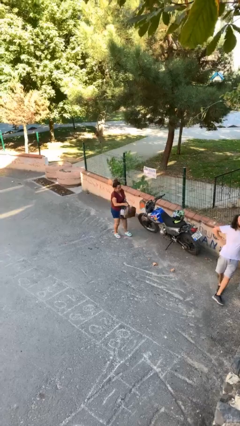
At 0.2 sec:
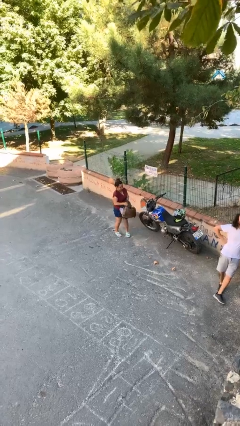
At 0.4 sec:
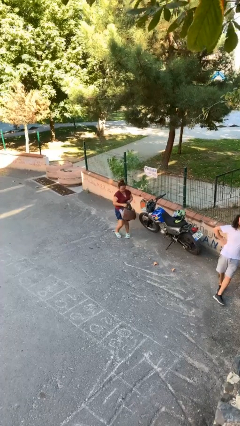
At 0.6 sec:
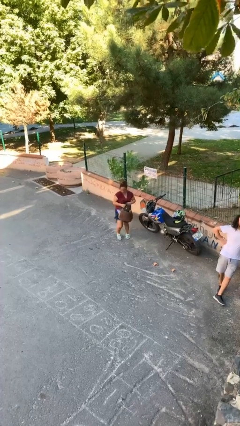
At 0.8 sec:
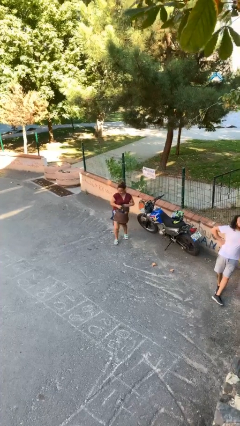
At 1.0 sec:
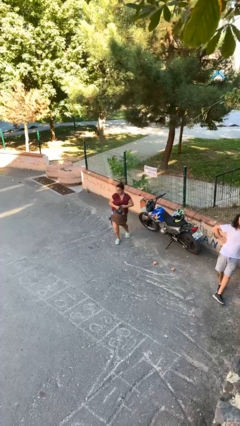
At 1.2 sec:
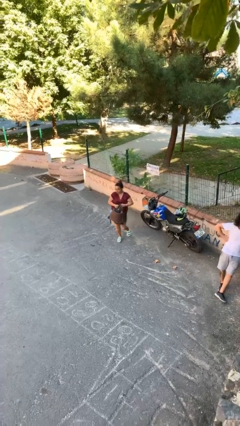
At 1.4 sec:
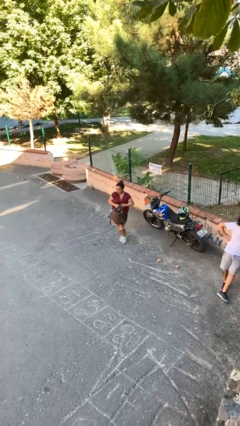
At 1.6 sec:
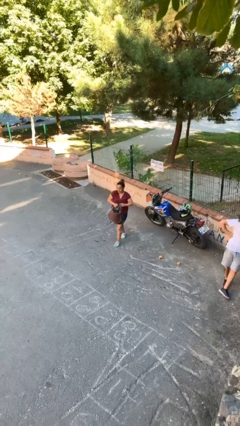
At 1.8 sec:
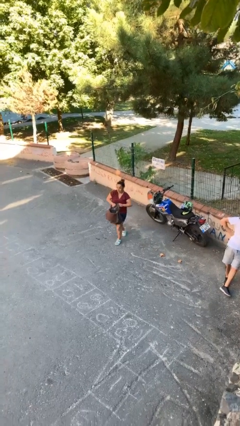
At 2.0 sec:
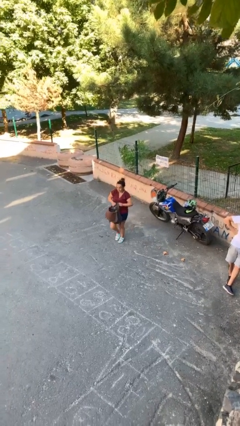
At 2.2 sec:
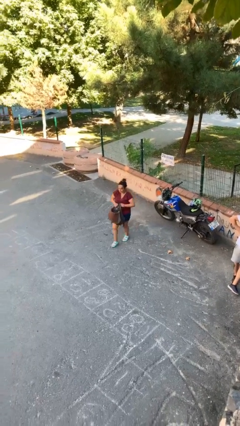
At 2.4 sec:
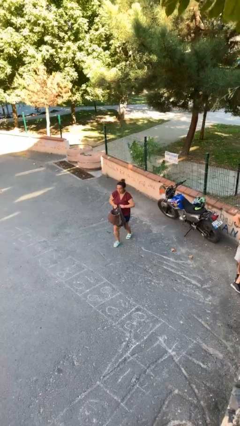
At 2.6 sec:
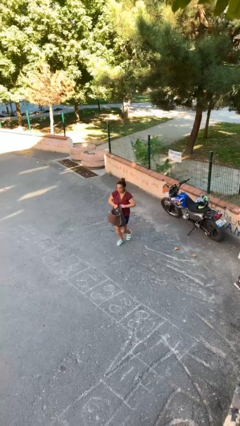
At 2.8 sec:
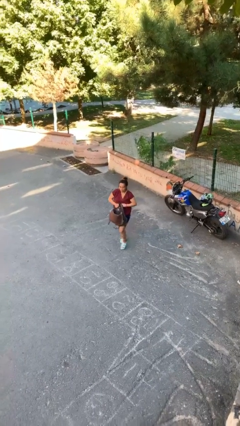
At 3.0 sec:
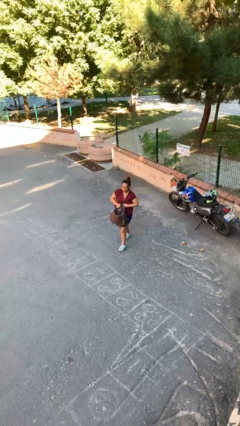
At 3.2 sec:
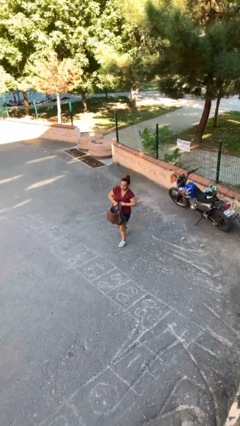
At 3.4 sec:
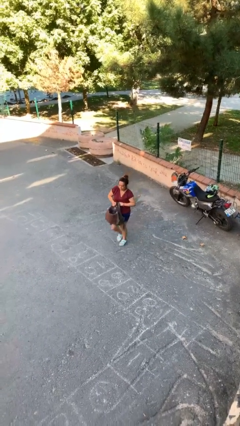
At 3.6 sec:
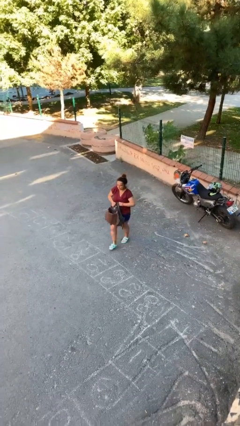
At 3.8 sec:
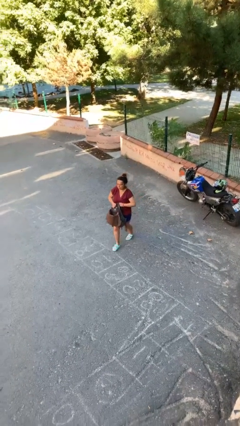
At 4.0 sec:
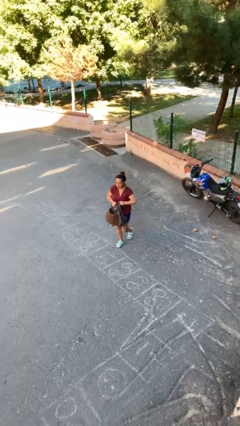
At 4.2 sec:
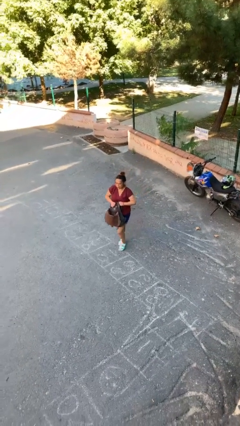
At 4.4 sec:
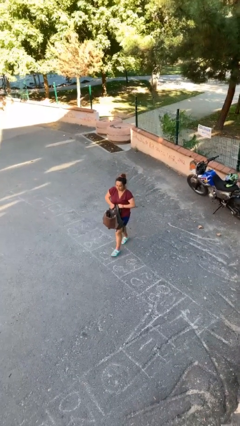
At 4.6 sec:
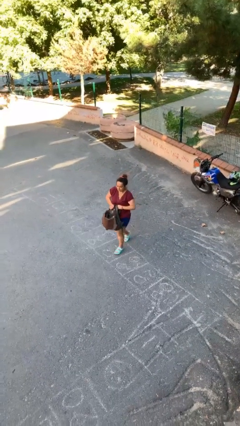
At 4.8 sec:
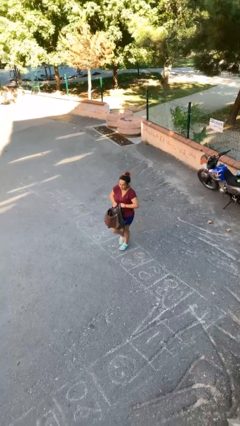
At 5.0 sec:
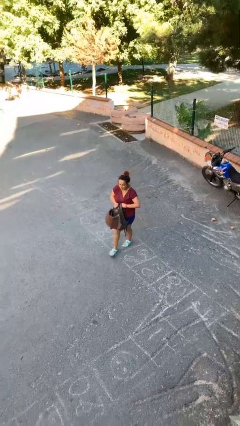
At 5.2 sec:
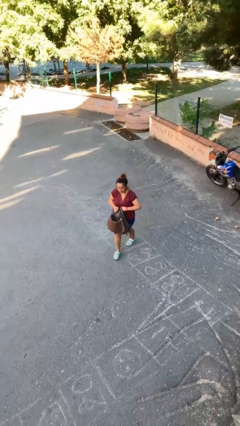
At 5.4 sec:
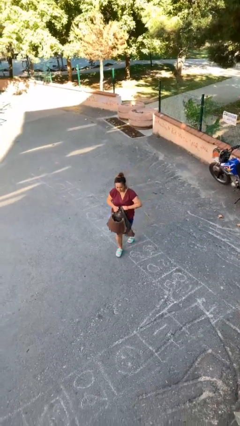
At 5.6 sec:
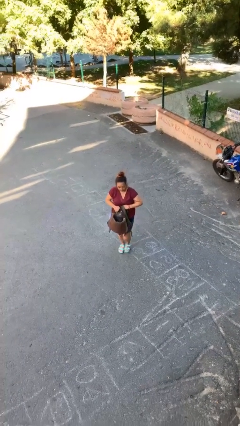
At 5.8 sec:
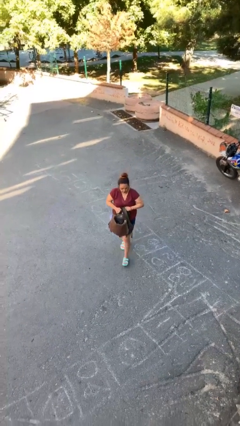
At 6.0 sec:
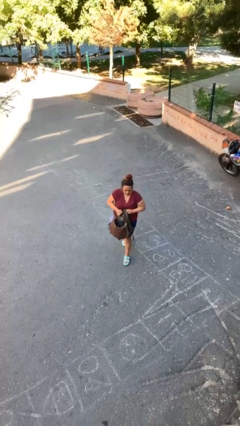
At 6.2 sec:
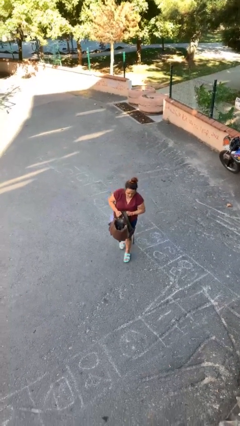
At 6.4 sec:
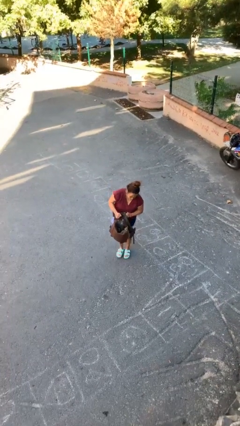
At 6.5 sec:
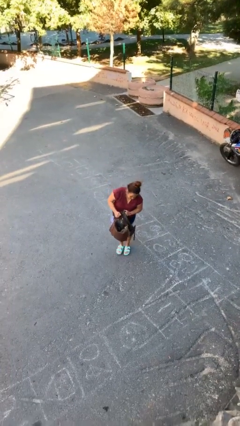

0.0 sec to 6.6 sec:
person carries heavy object

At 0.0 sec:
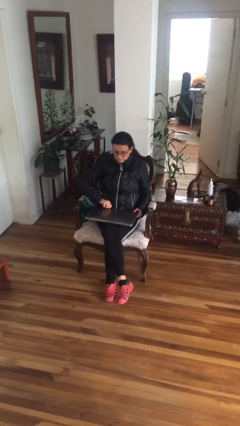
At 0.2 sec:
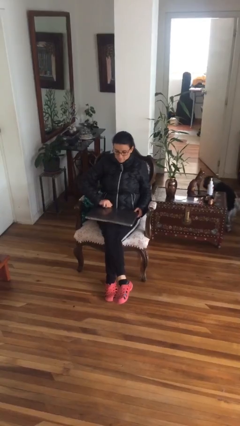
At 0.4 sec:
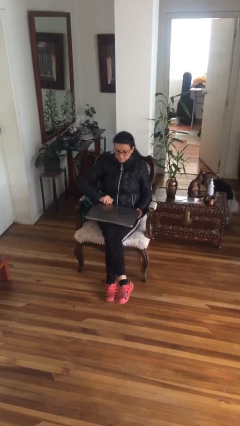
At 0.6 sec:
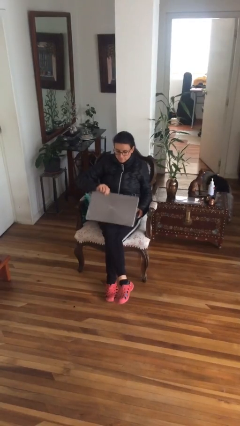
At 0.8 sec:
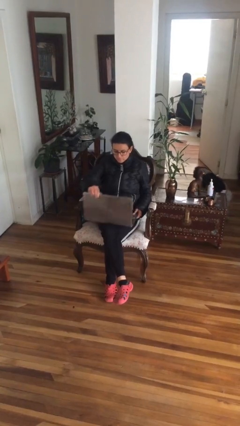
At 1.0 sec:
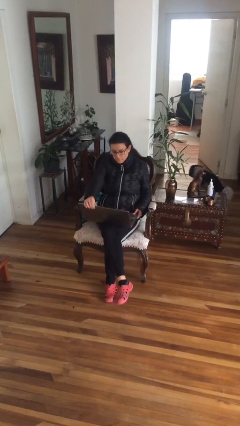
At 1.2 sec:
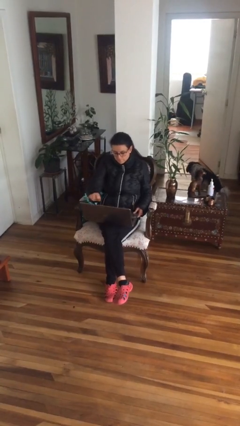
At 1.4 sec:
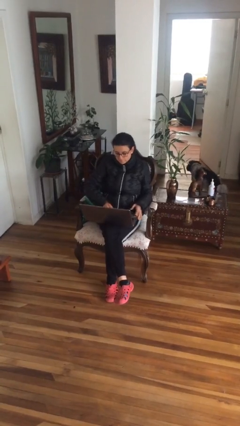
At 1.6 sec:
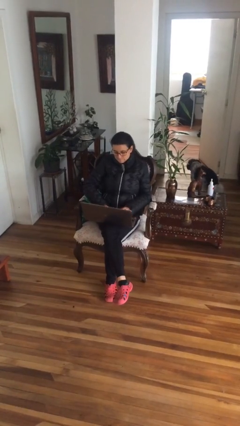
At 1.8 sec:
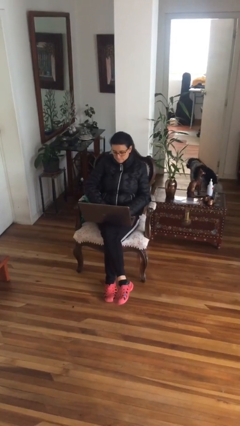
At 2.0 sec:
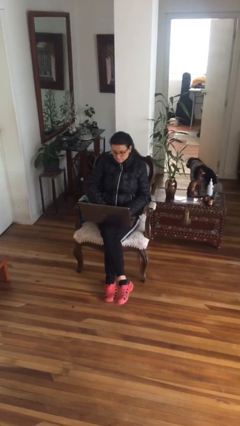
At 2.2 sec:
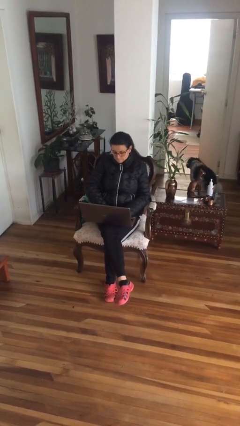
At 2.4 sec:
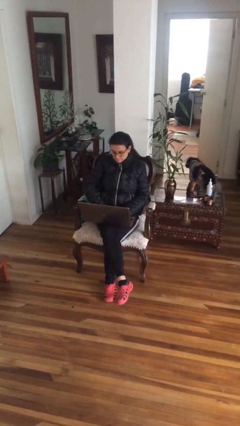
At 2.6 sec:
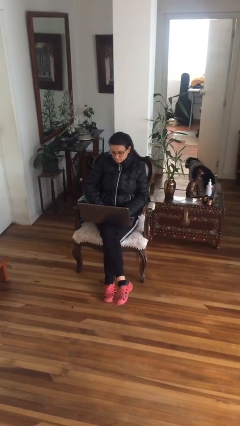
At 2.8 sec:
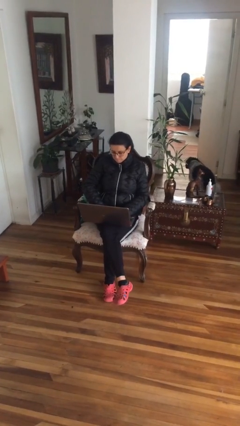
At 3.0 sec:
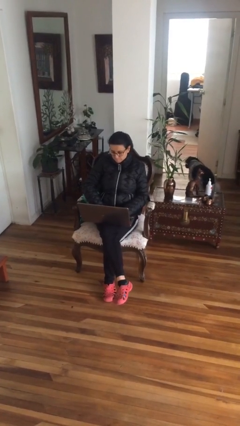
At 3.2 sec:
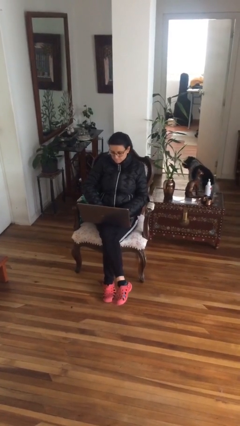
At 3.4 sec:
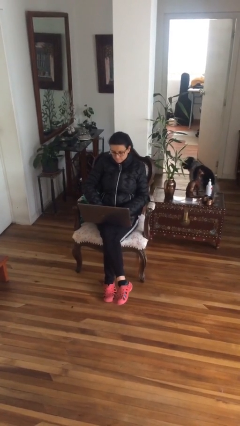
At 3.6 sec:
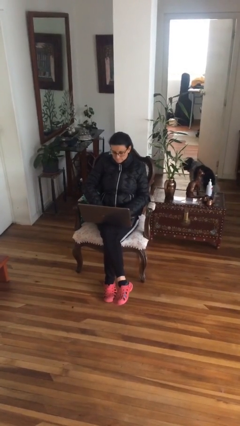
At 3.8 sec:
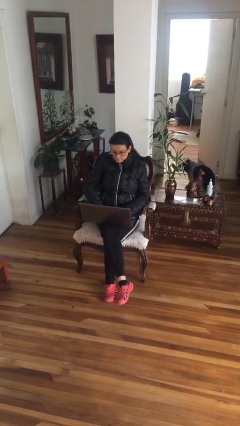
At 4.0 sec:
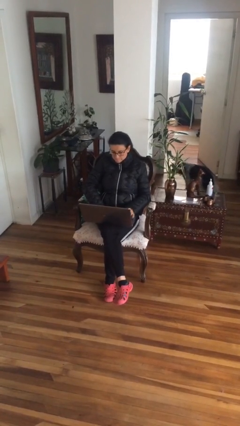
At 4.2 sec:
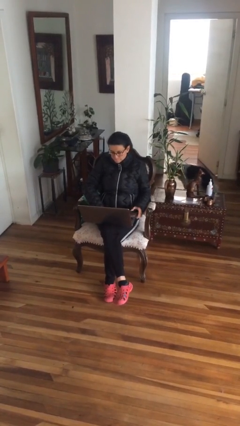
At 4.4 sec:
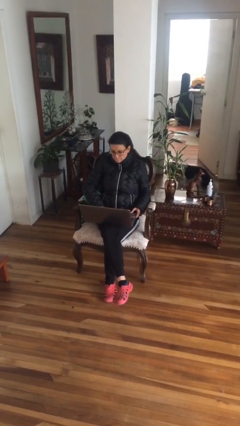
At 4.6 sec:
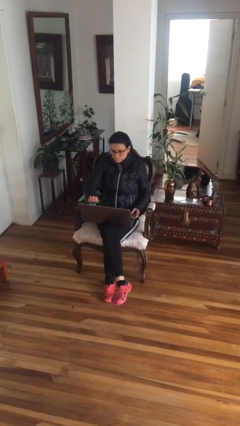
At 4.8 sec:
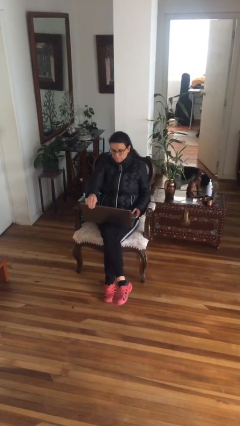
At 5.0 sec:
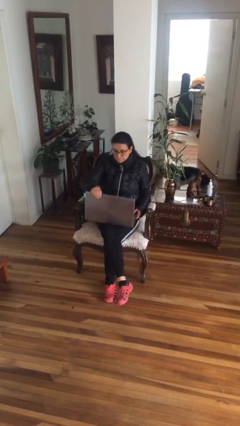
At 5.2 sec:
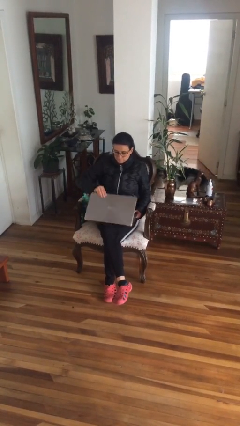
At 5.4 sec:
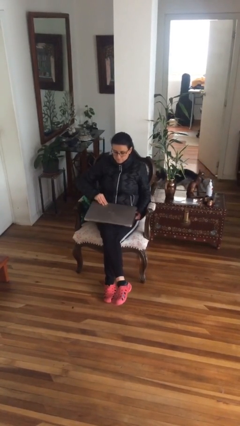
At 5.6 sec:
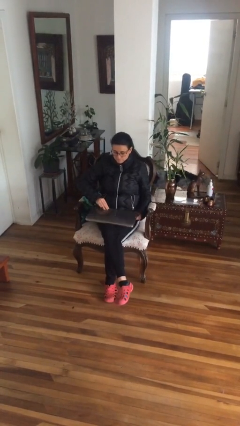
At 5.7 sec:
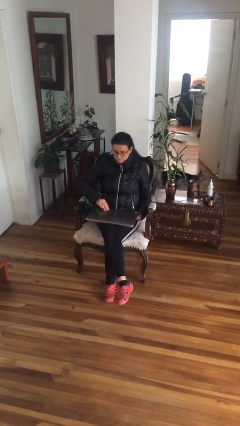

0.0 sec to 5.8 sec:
person interacts with laptop

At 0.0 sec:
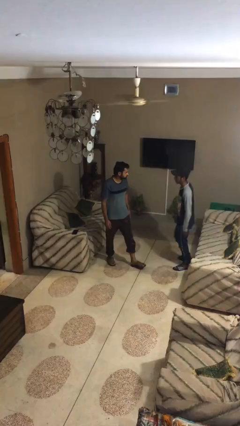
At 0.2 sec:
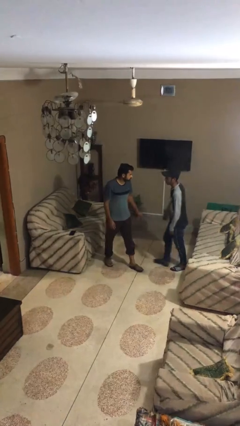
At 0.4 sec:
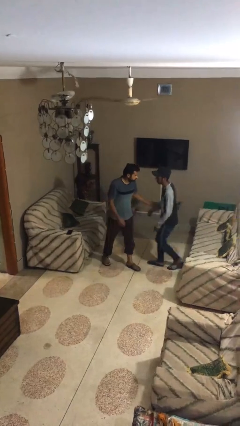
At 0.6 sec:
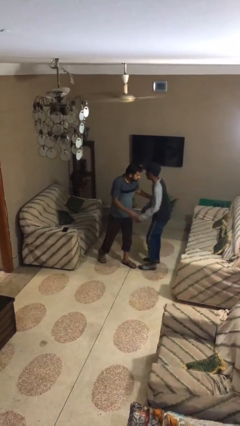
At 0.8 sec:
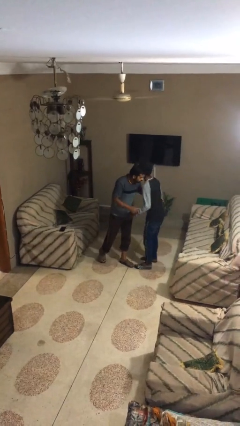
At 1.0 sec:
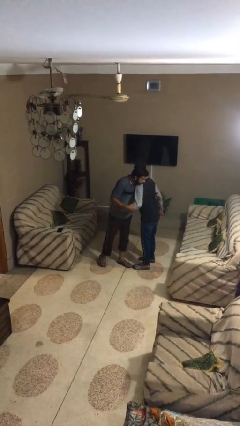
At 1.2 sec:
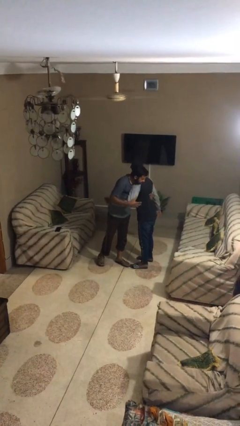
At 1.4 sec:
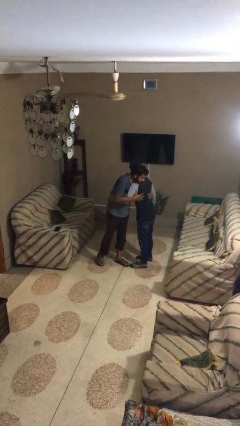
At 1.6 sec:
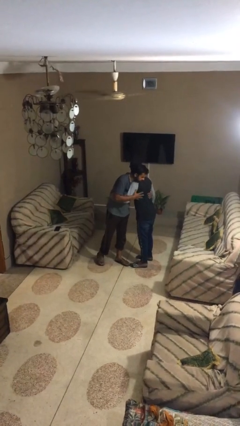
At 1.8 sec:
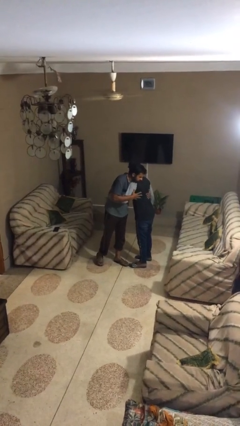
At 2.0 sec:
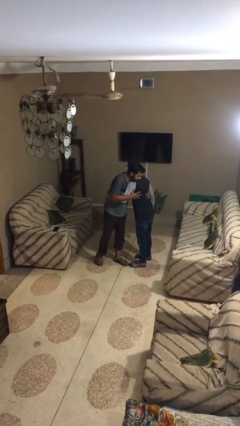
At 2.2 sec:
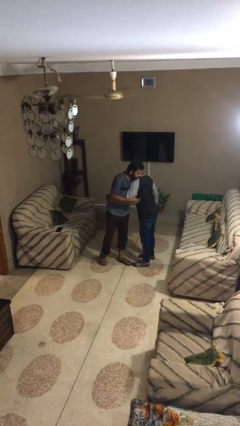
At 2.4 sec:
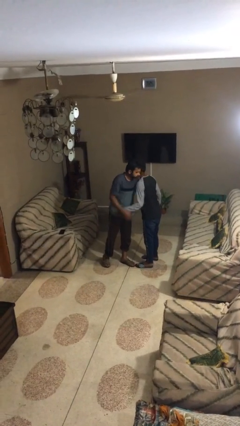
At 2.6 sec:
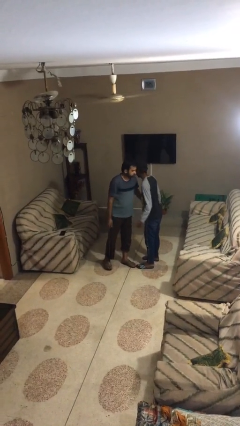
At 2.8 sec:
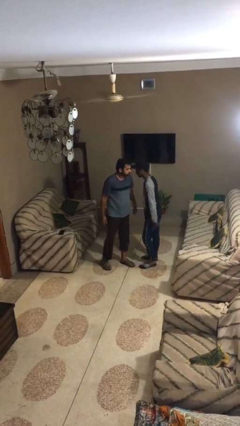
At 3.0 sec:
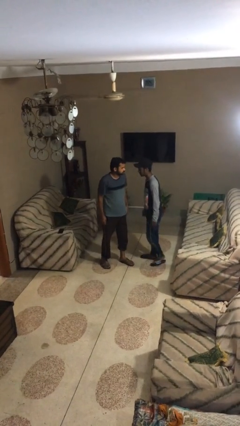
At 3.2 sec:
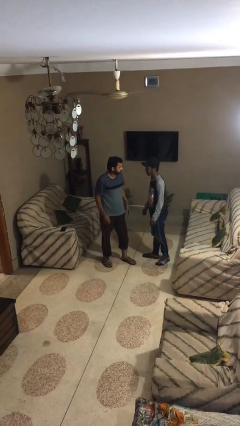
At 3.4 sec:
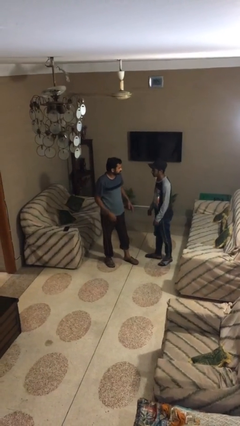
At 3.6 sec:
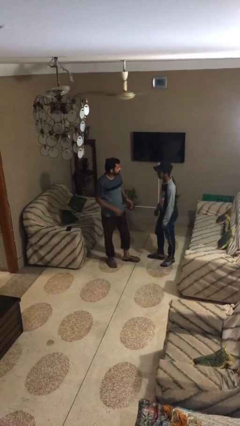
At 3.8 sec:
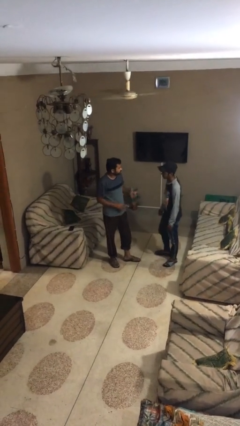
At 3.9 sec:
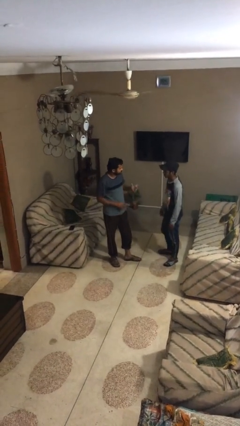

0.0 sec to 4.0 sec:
person embraces person

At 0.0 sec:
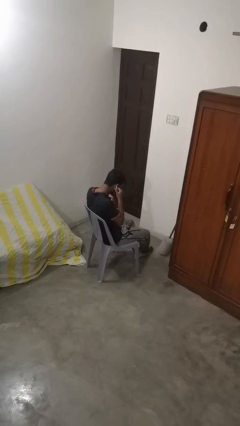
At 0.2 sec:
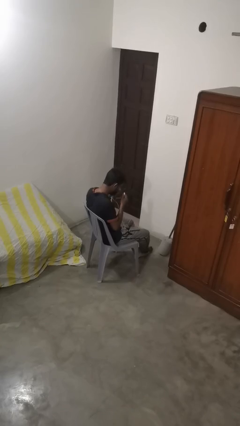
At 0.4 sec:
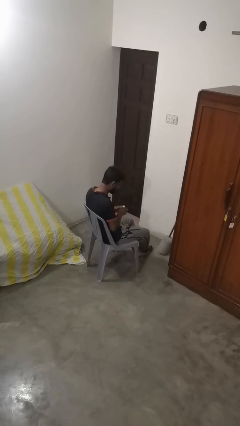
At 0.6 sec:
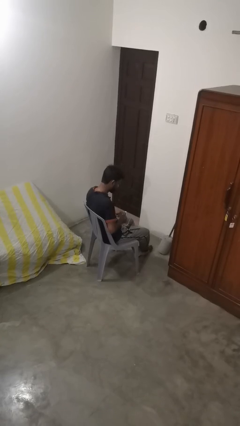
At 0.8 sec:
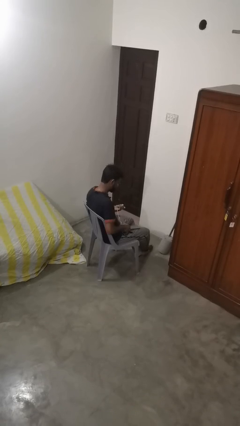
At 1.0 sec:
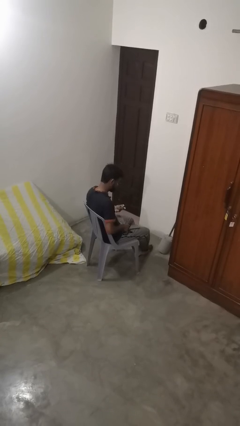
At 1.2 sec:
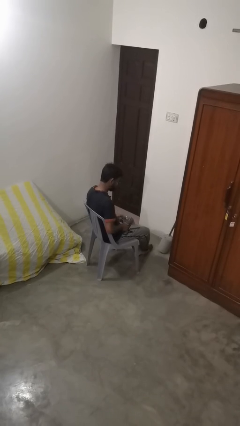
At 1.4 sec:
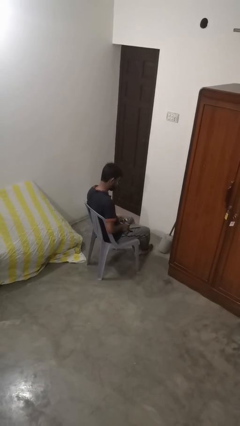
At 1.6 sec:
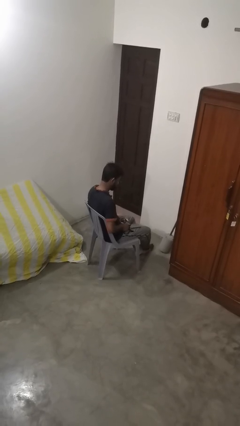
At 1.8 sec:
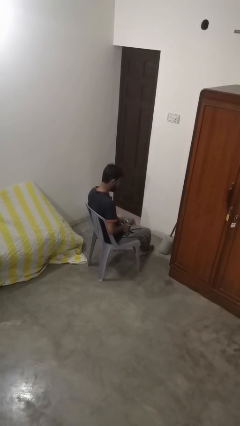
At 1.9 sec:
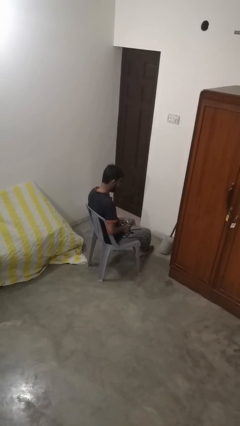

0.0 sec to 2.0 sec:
person takes off headphones
